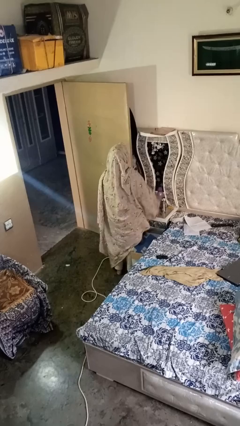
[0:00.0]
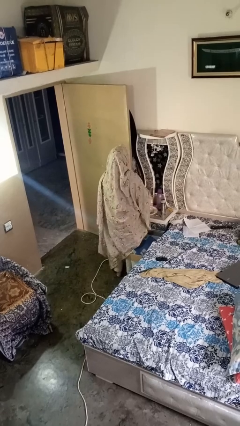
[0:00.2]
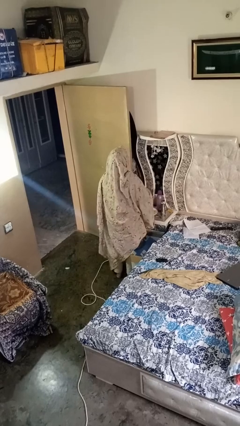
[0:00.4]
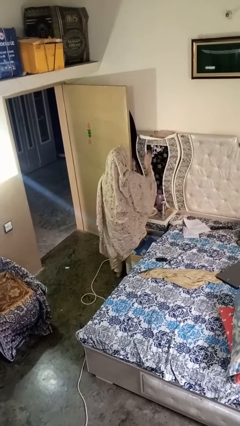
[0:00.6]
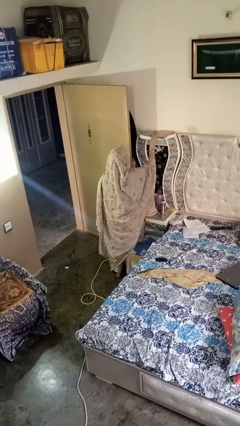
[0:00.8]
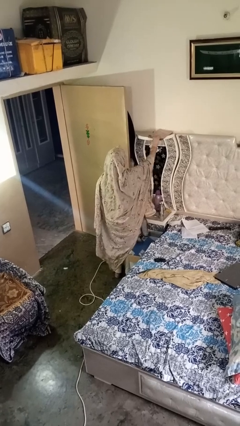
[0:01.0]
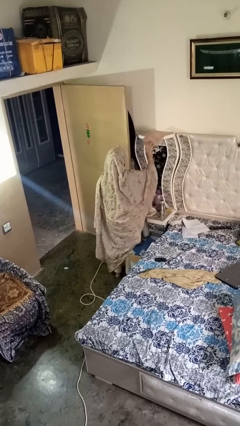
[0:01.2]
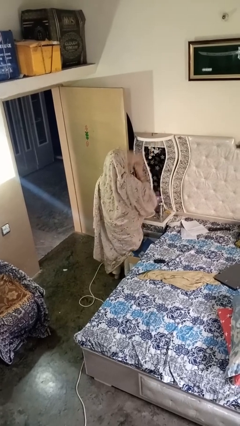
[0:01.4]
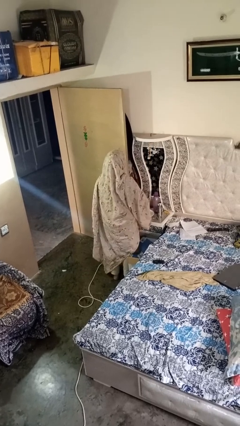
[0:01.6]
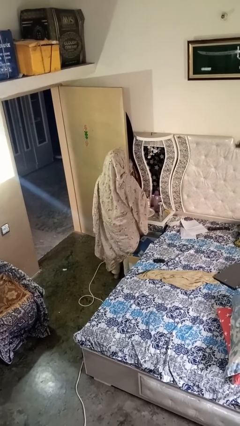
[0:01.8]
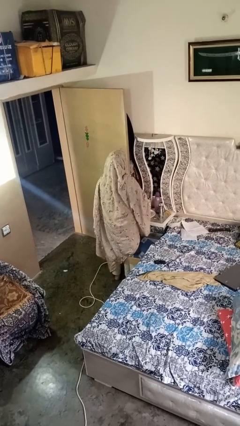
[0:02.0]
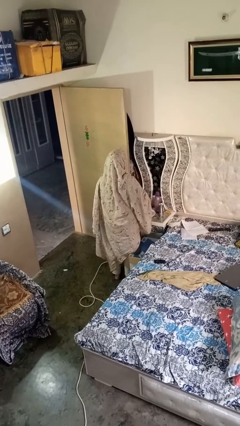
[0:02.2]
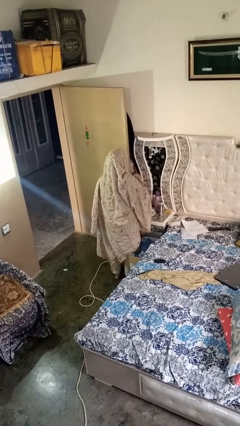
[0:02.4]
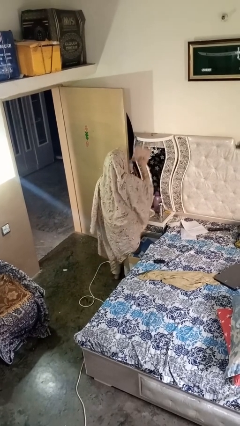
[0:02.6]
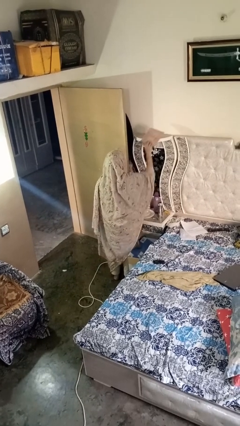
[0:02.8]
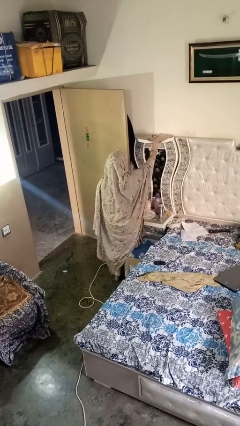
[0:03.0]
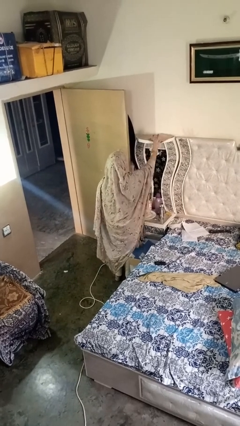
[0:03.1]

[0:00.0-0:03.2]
person picks up object from shelf

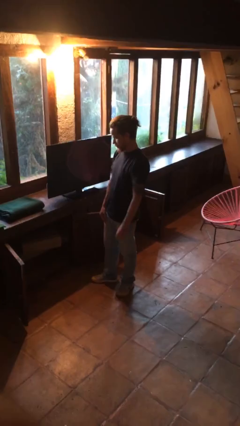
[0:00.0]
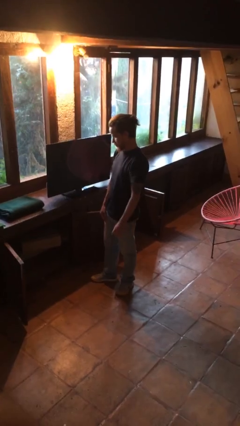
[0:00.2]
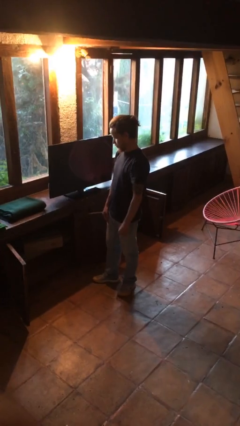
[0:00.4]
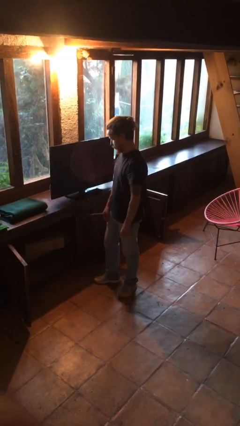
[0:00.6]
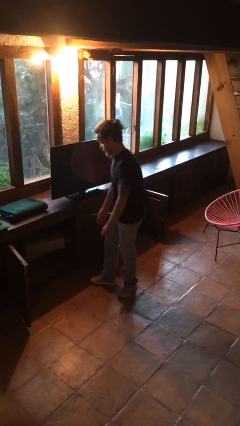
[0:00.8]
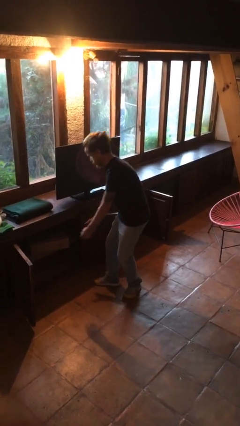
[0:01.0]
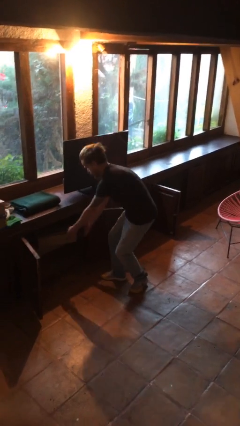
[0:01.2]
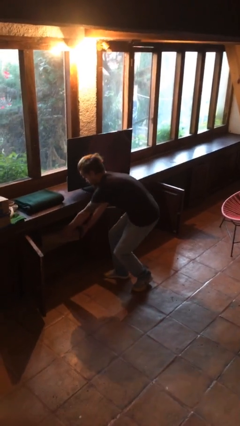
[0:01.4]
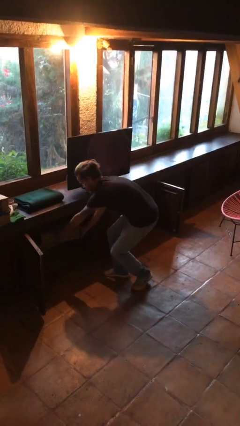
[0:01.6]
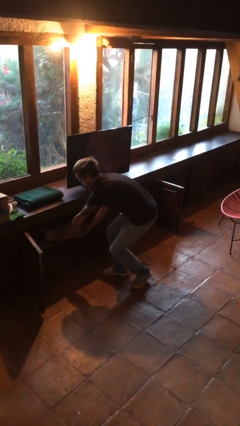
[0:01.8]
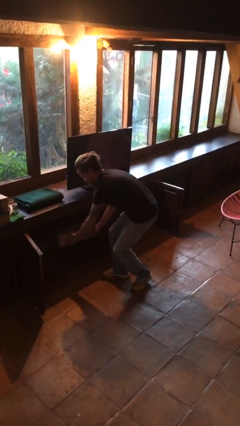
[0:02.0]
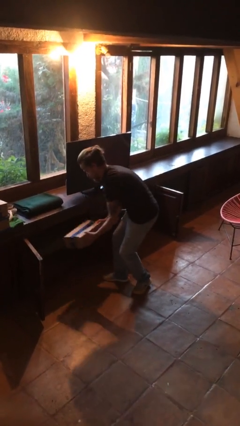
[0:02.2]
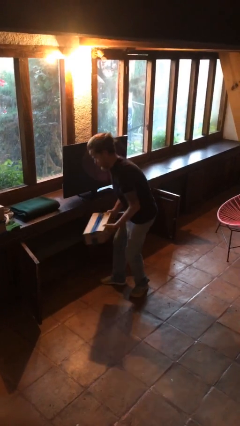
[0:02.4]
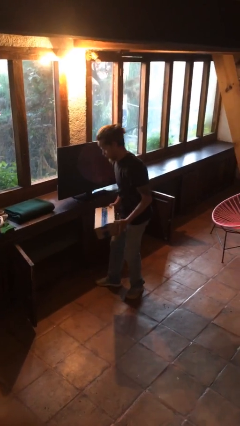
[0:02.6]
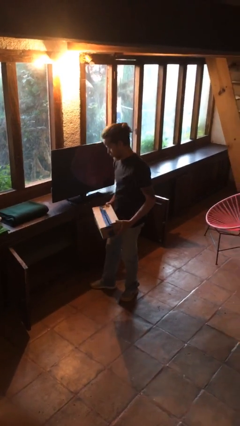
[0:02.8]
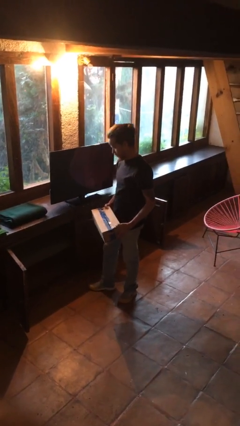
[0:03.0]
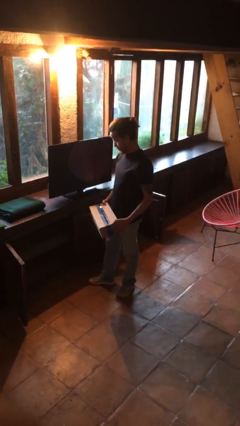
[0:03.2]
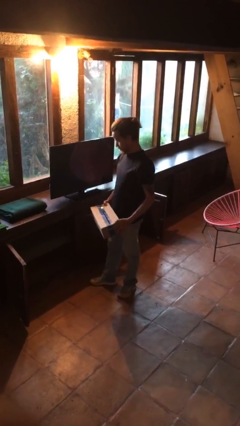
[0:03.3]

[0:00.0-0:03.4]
person picks up object from cabinet

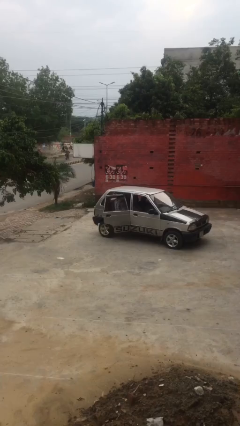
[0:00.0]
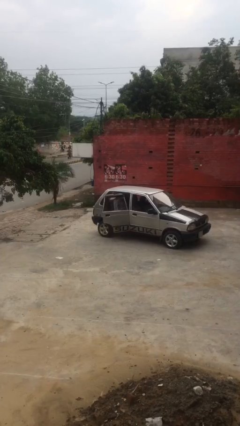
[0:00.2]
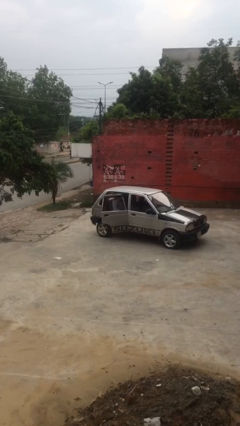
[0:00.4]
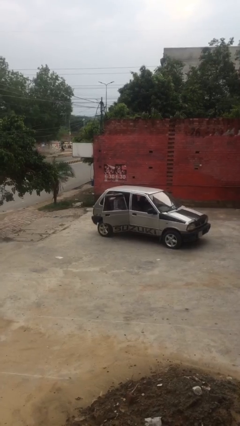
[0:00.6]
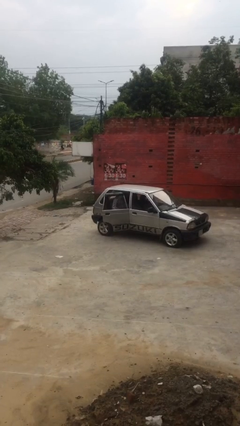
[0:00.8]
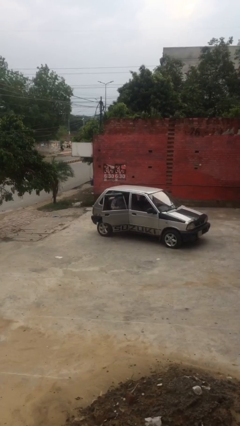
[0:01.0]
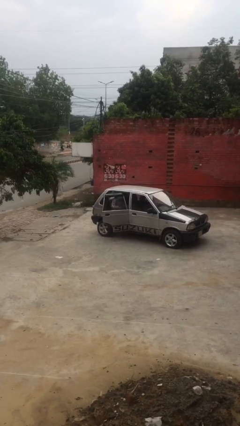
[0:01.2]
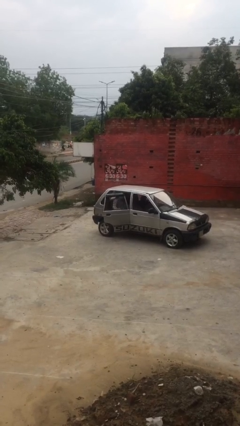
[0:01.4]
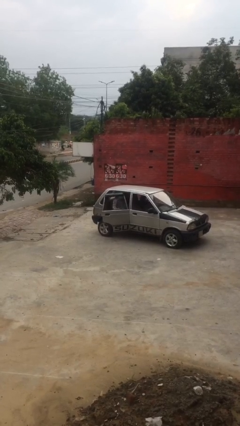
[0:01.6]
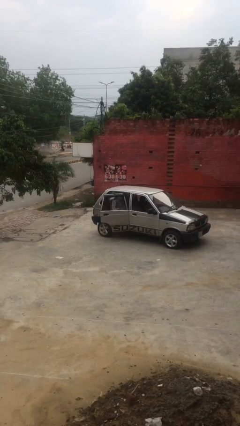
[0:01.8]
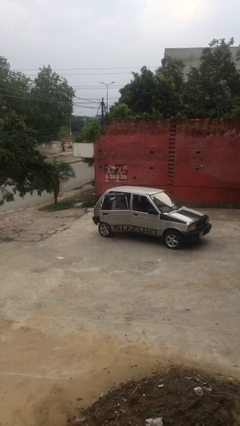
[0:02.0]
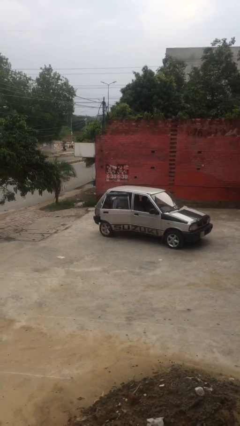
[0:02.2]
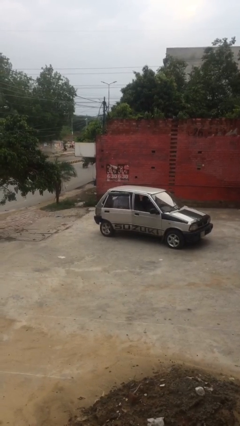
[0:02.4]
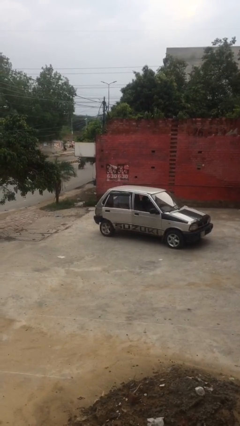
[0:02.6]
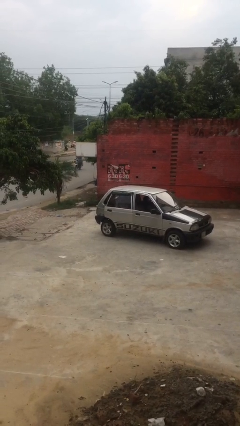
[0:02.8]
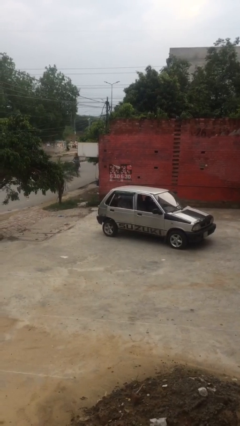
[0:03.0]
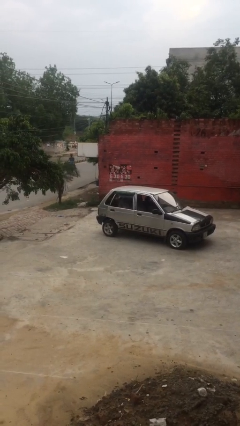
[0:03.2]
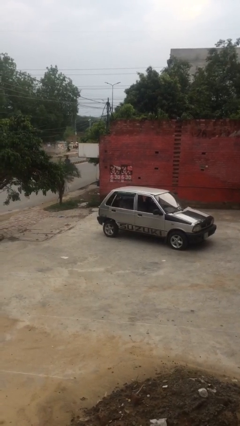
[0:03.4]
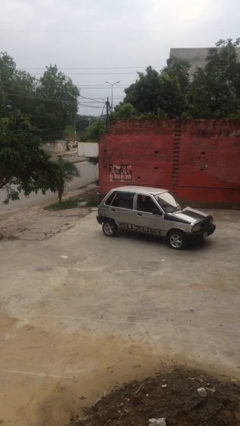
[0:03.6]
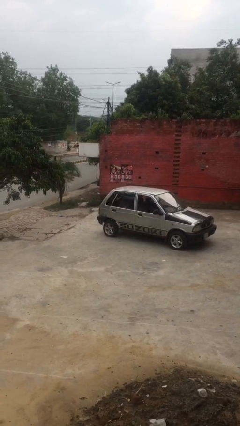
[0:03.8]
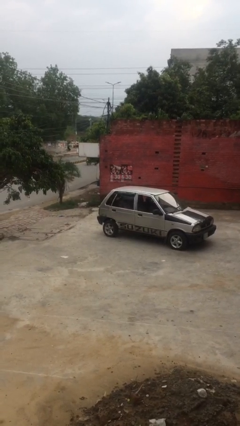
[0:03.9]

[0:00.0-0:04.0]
person closes car door

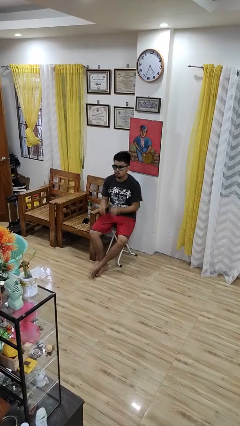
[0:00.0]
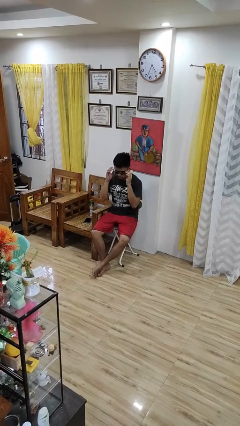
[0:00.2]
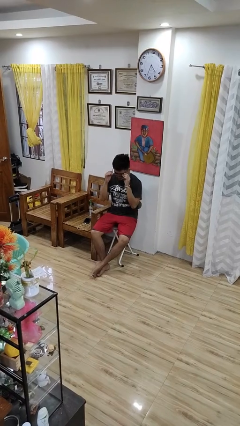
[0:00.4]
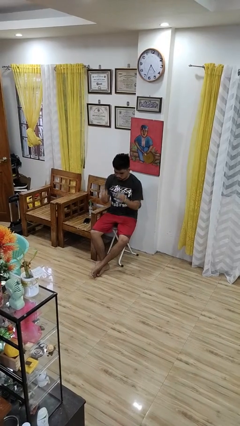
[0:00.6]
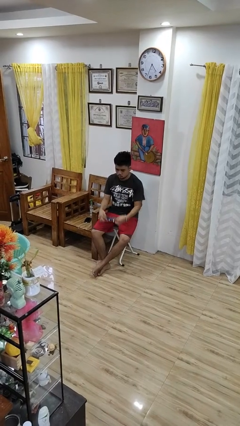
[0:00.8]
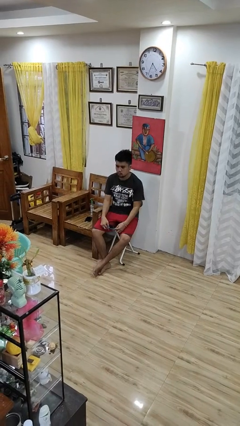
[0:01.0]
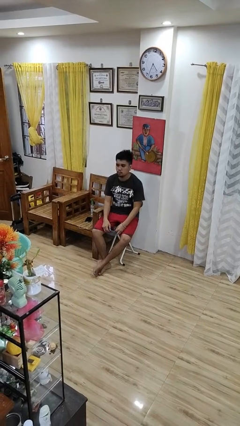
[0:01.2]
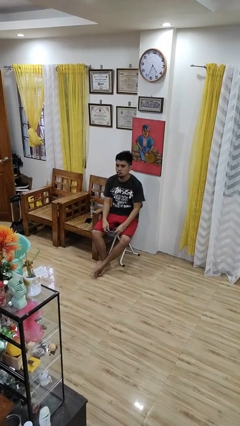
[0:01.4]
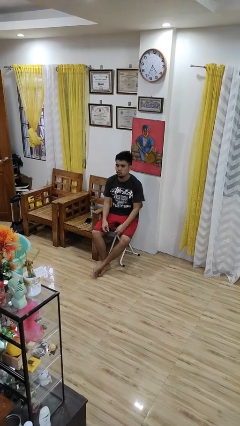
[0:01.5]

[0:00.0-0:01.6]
person takes off sunglasses

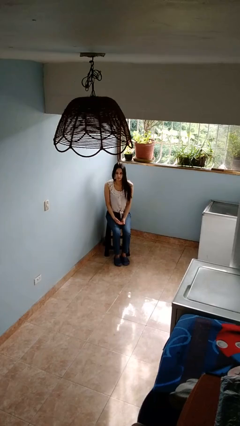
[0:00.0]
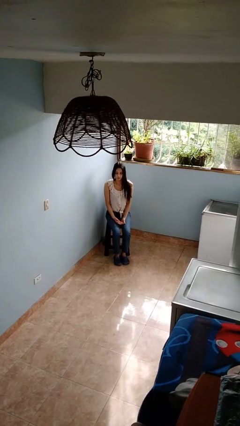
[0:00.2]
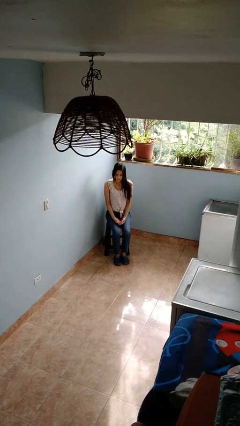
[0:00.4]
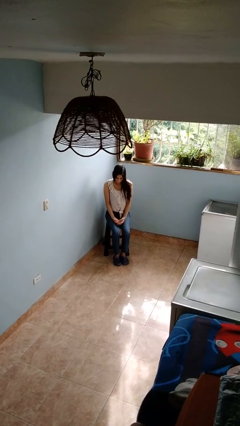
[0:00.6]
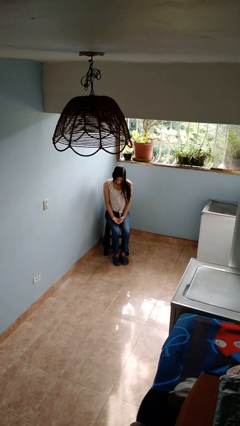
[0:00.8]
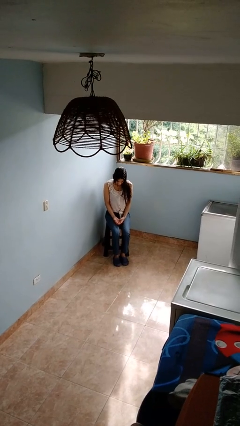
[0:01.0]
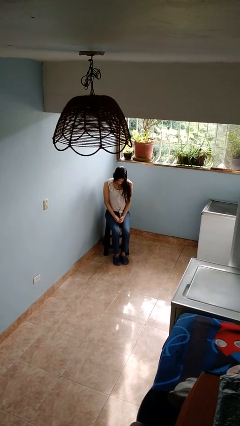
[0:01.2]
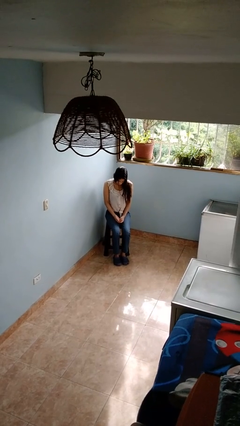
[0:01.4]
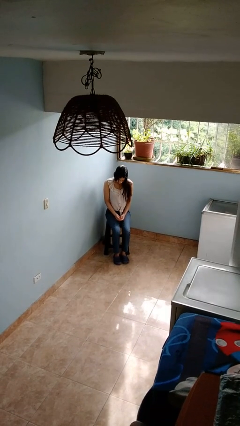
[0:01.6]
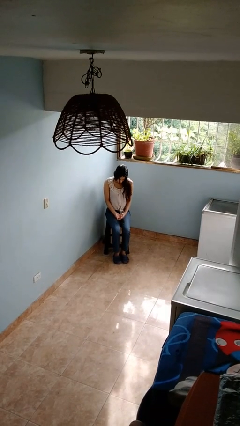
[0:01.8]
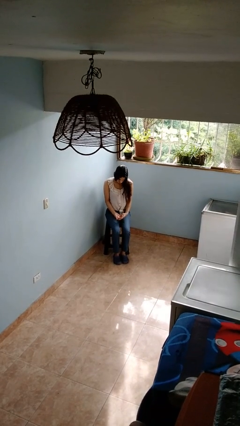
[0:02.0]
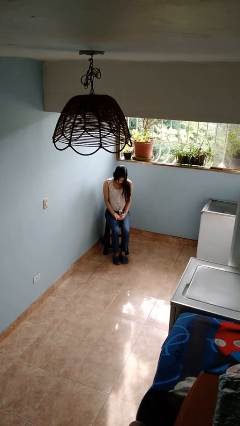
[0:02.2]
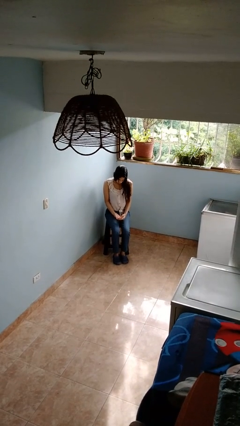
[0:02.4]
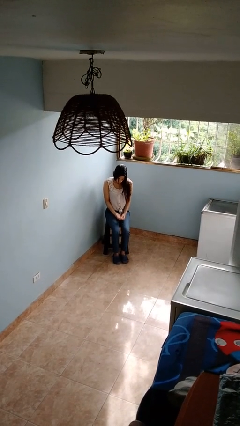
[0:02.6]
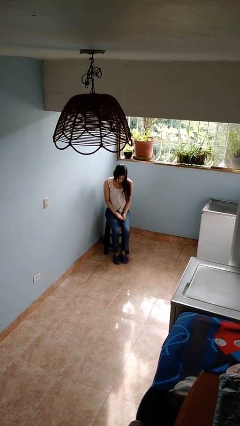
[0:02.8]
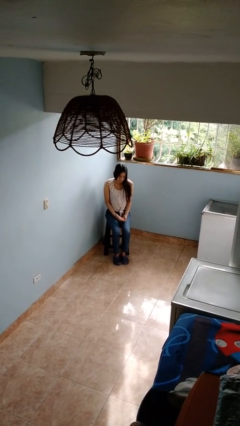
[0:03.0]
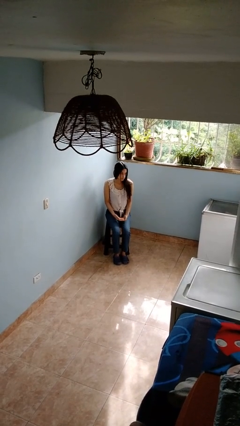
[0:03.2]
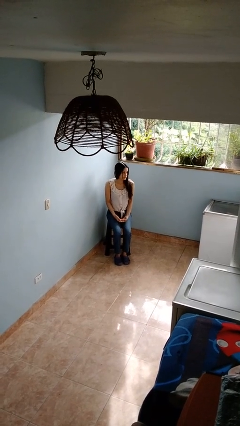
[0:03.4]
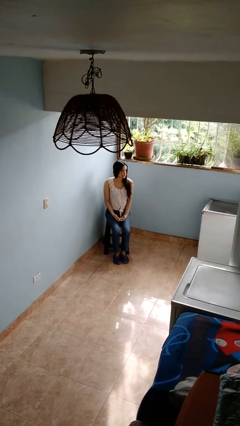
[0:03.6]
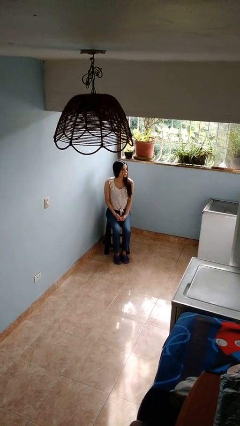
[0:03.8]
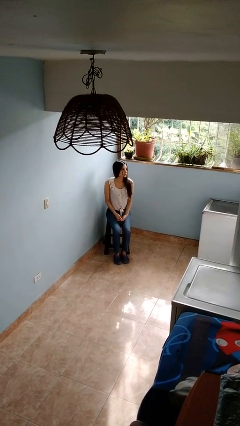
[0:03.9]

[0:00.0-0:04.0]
person looks at hands in lap

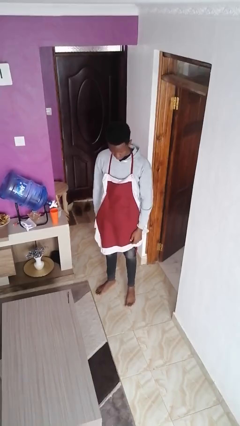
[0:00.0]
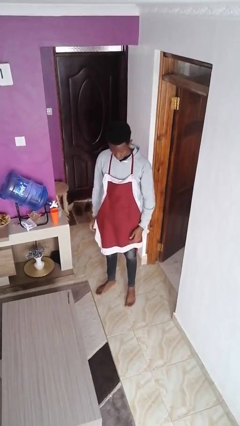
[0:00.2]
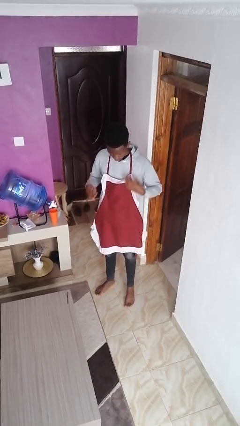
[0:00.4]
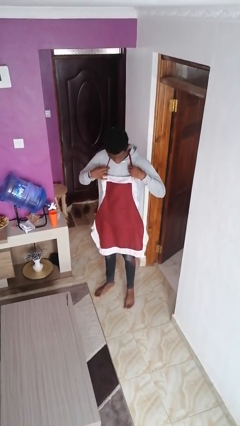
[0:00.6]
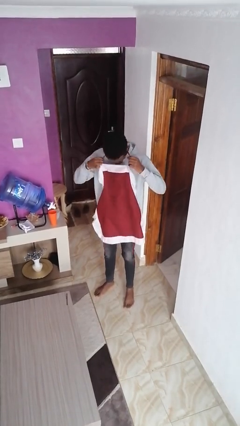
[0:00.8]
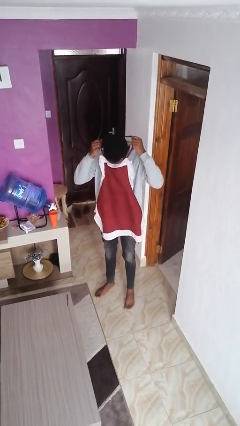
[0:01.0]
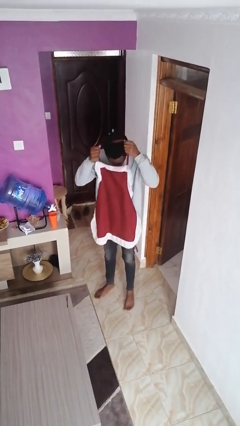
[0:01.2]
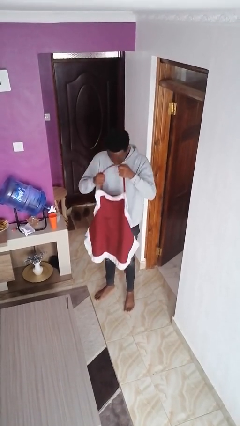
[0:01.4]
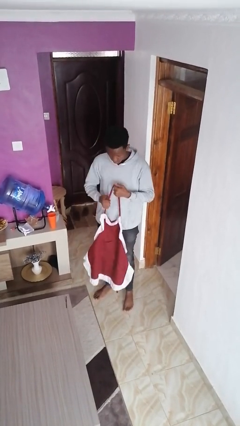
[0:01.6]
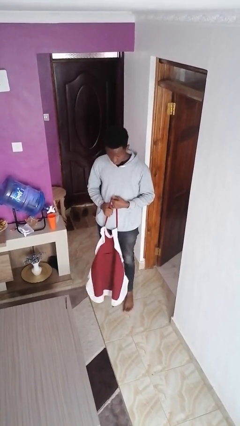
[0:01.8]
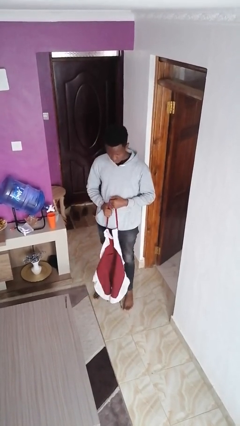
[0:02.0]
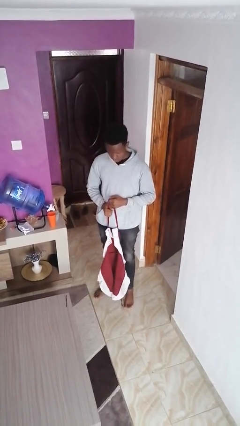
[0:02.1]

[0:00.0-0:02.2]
person takes off apron
